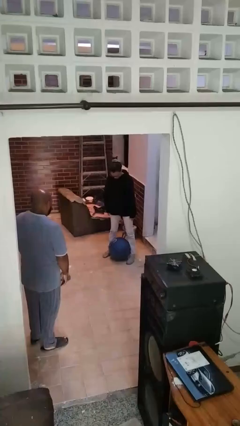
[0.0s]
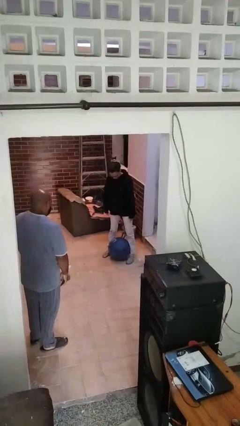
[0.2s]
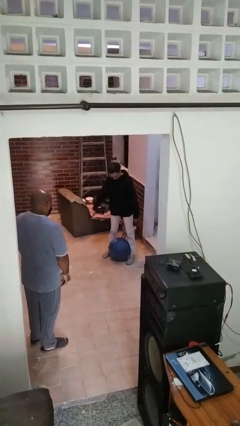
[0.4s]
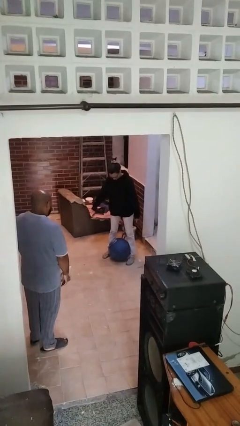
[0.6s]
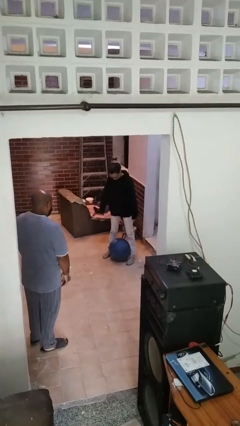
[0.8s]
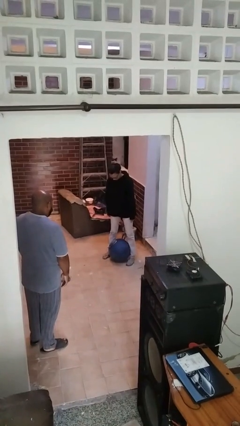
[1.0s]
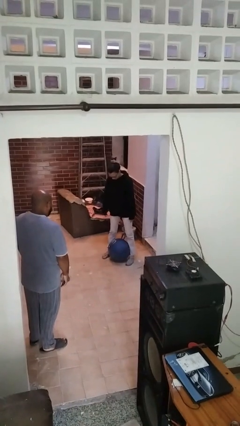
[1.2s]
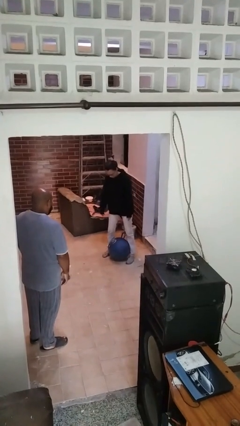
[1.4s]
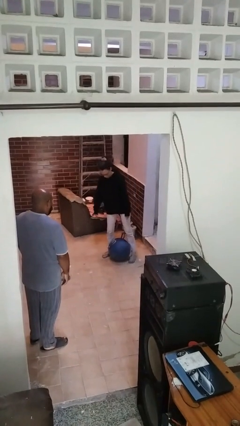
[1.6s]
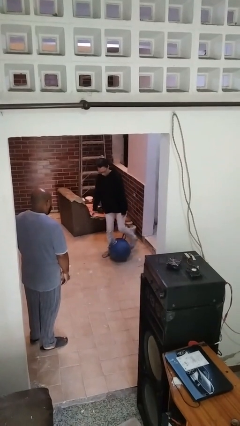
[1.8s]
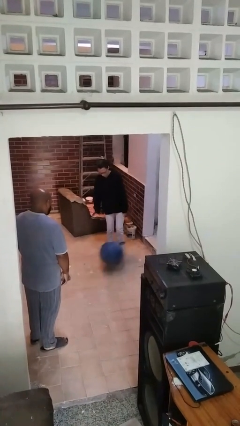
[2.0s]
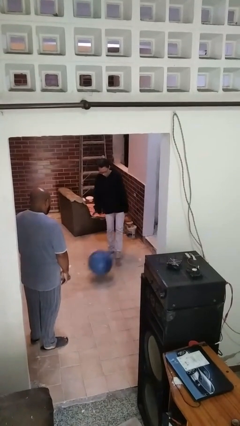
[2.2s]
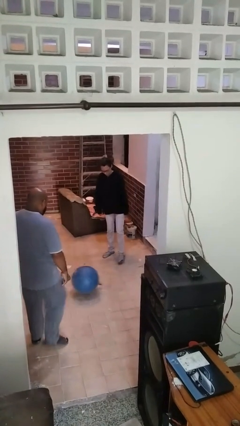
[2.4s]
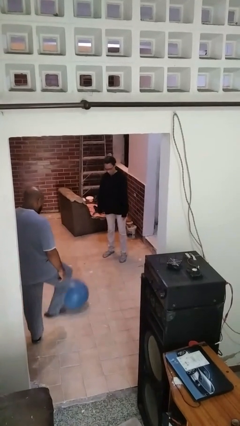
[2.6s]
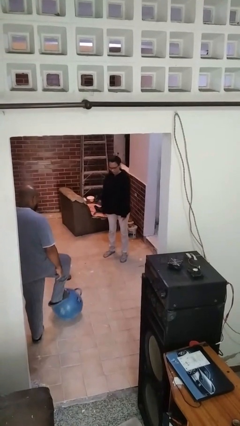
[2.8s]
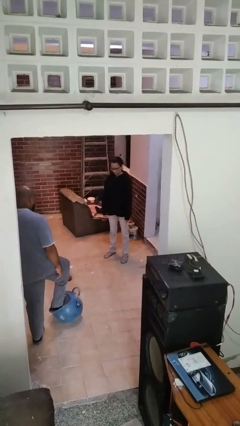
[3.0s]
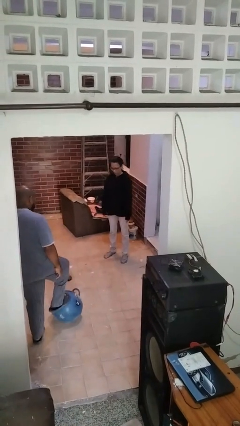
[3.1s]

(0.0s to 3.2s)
person kicks object to person

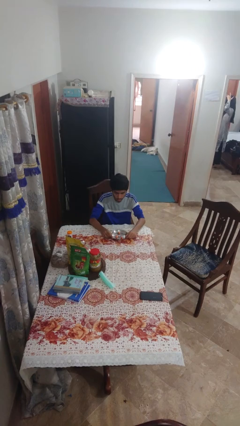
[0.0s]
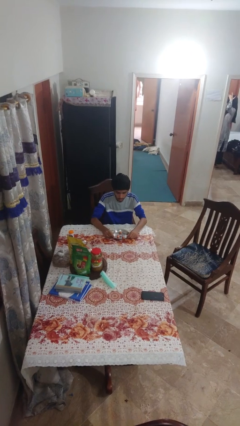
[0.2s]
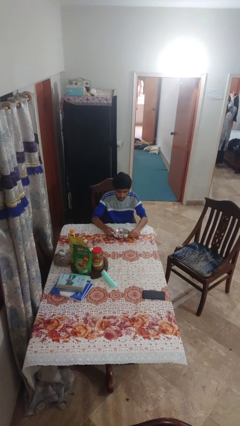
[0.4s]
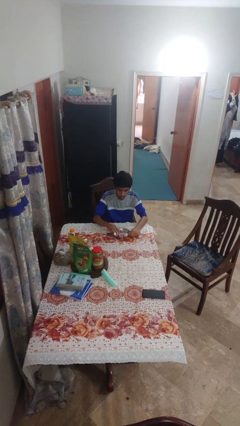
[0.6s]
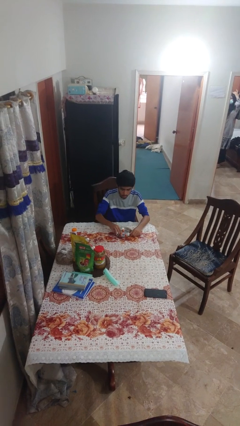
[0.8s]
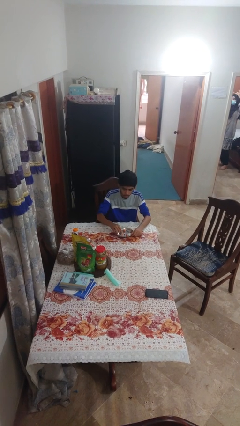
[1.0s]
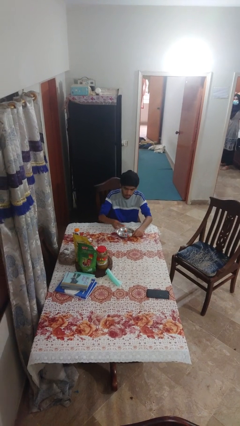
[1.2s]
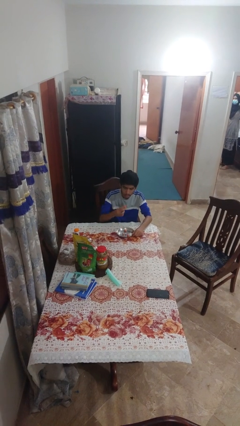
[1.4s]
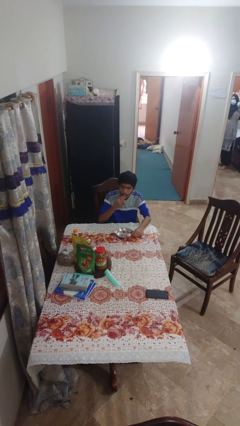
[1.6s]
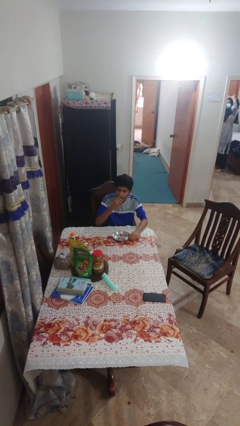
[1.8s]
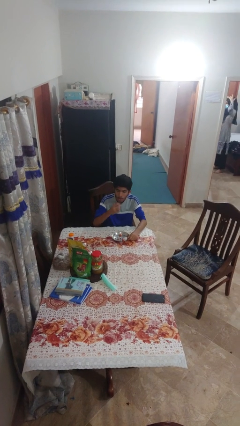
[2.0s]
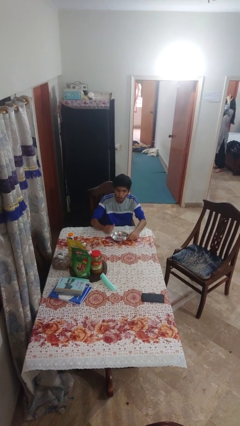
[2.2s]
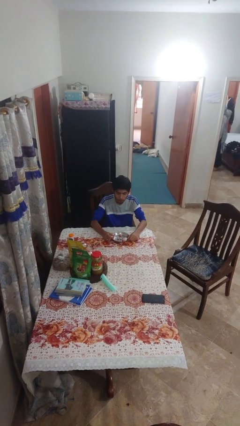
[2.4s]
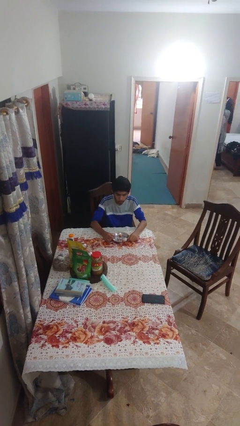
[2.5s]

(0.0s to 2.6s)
person eats with hands

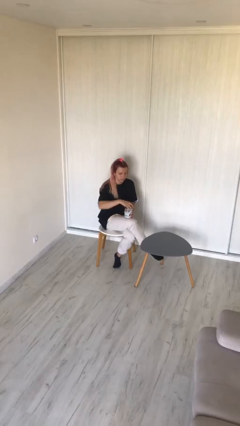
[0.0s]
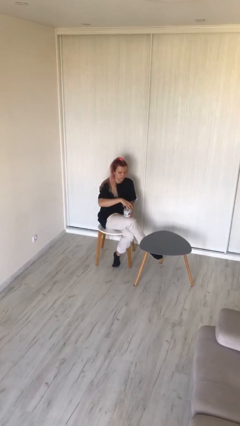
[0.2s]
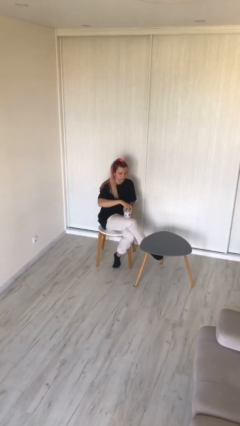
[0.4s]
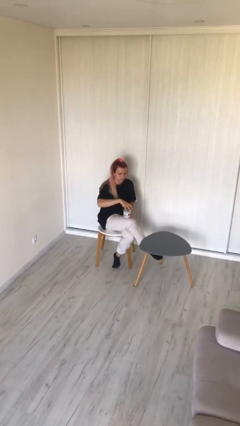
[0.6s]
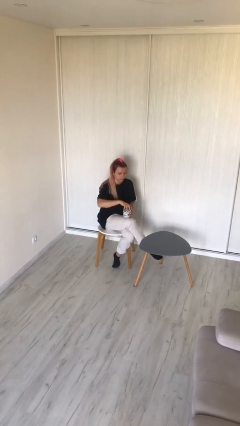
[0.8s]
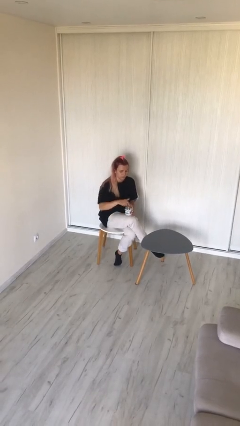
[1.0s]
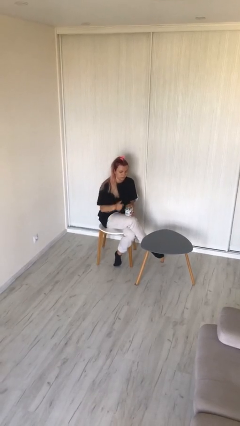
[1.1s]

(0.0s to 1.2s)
person closes jar

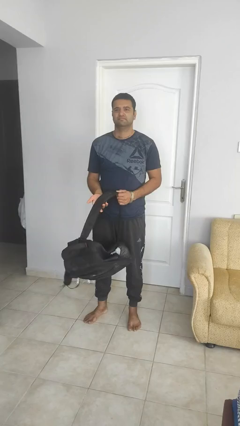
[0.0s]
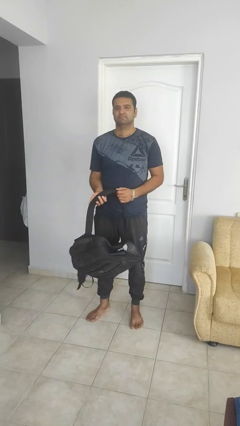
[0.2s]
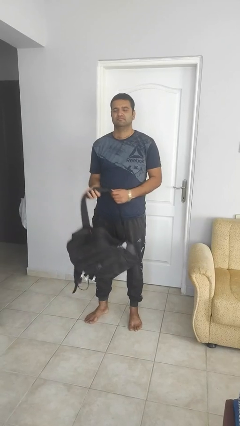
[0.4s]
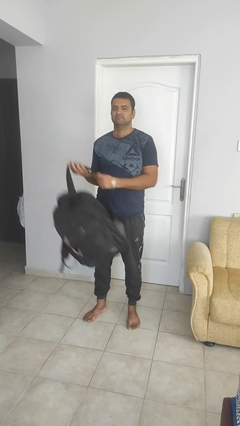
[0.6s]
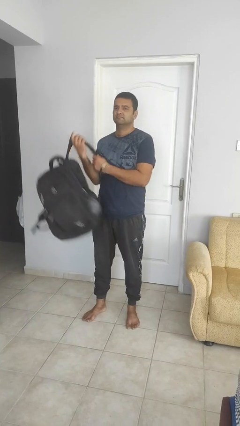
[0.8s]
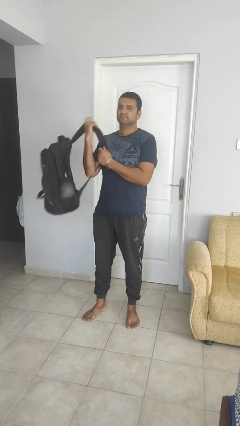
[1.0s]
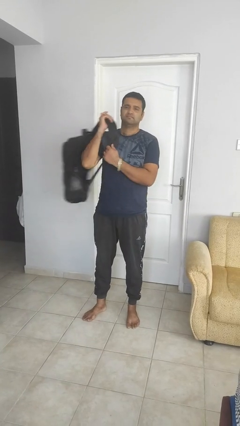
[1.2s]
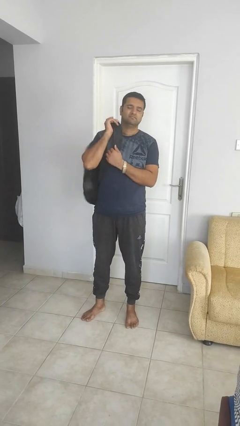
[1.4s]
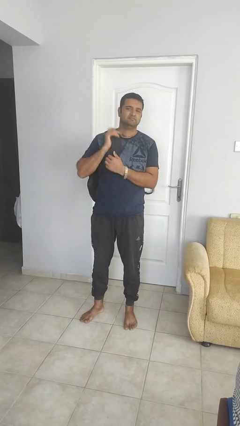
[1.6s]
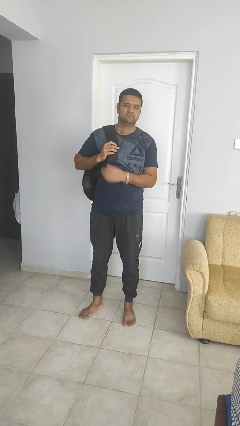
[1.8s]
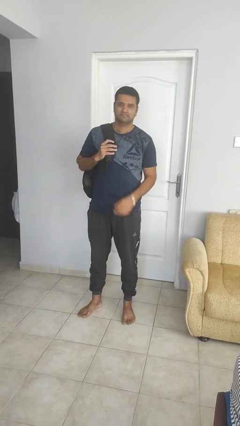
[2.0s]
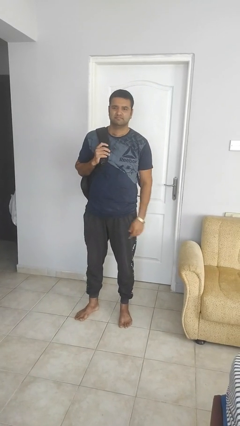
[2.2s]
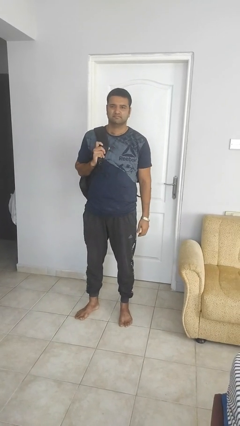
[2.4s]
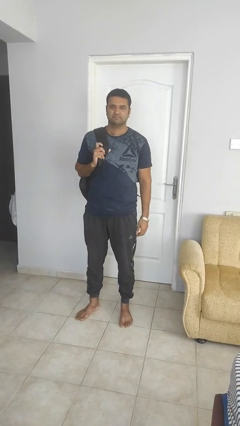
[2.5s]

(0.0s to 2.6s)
person puts on backpack

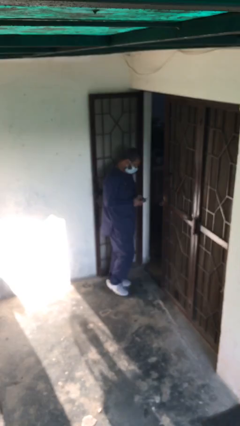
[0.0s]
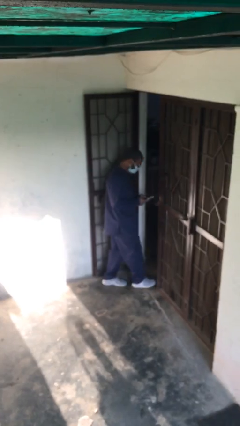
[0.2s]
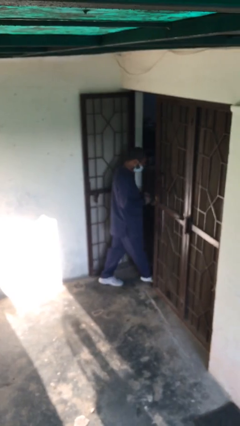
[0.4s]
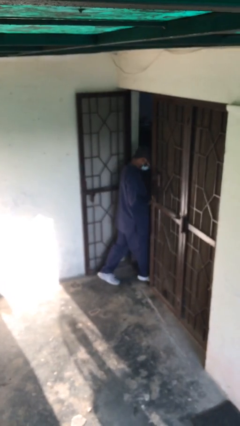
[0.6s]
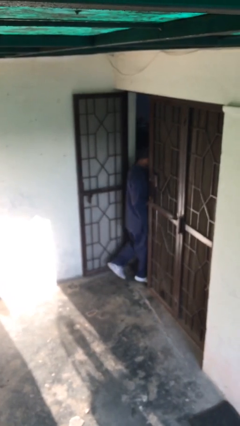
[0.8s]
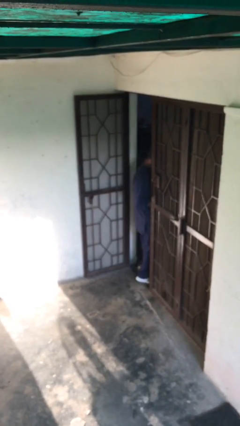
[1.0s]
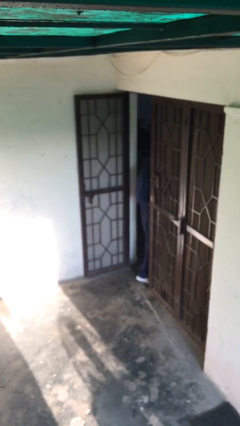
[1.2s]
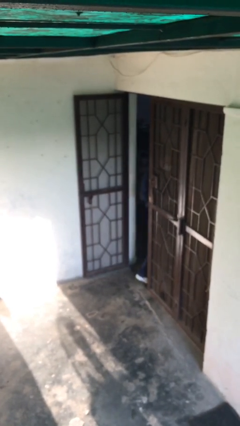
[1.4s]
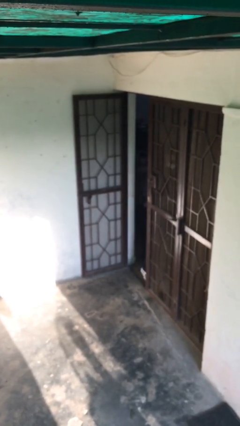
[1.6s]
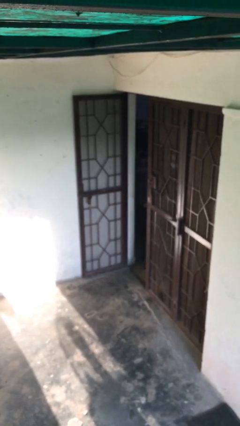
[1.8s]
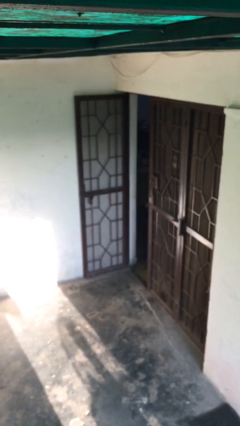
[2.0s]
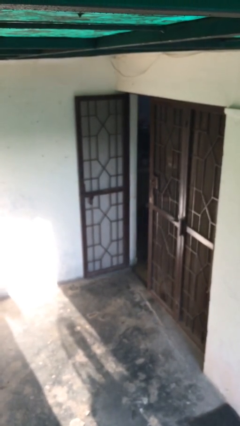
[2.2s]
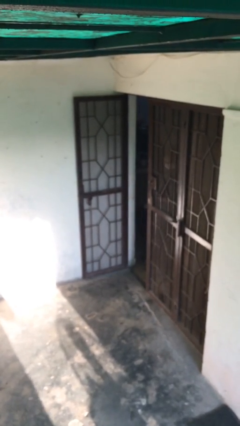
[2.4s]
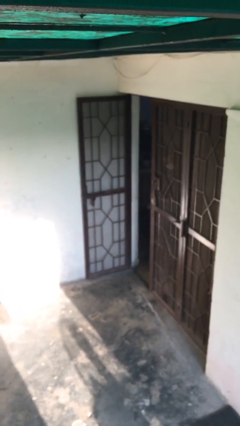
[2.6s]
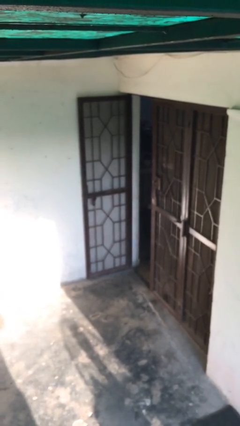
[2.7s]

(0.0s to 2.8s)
person exits scene through structure

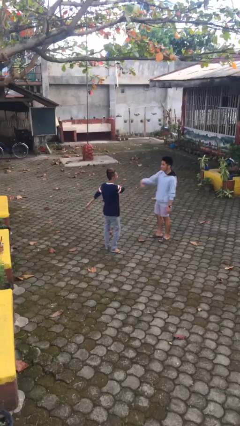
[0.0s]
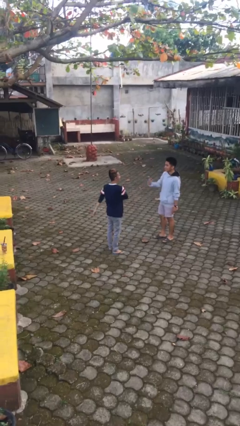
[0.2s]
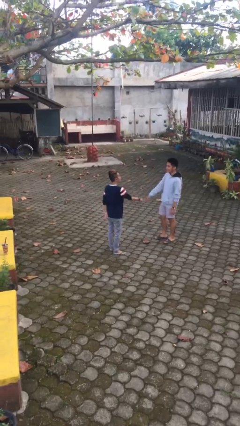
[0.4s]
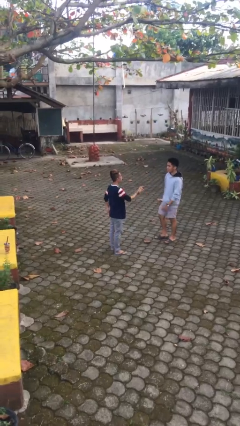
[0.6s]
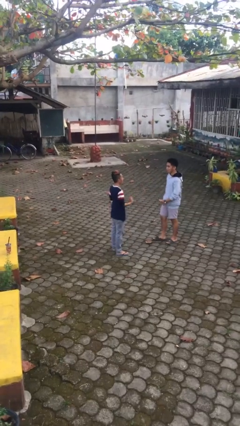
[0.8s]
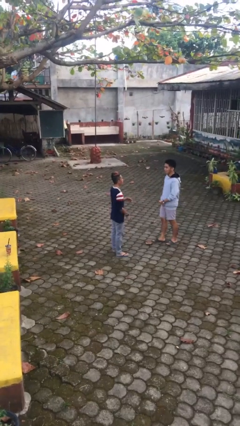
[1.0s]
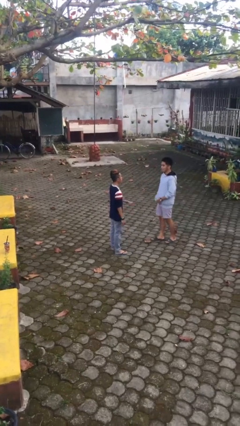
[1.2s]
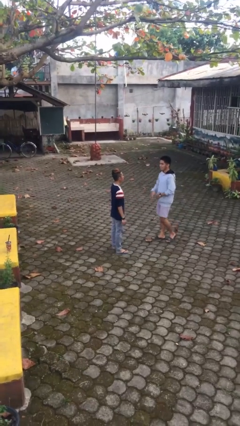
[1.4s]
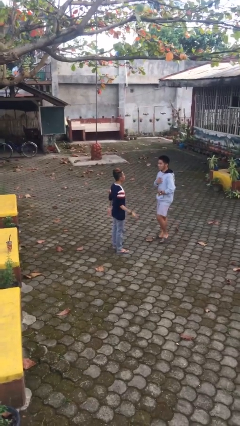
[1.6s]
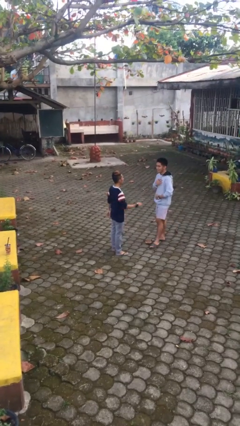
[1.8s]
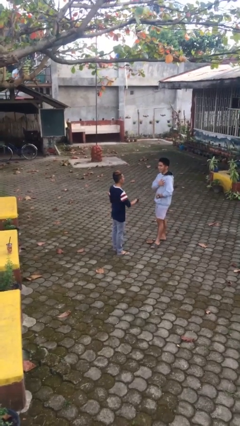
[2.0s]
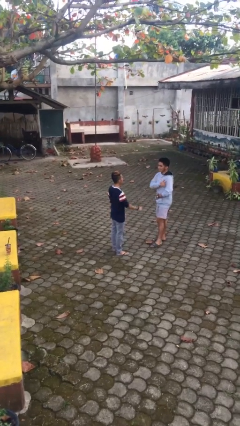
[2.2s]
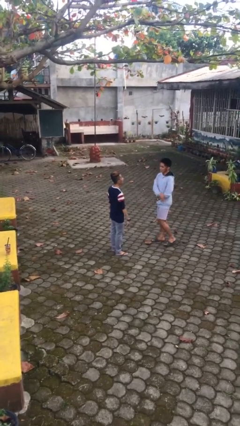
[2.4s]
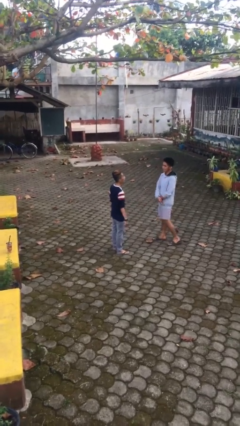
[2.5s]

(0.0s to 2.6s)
person talks to person

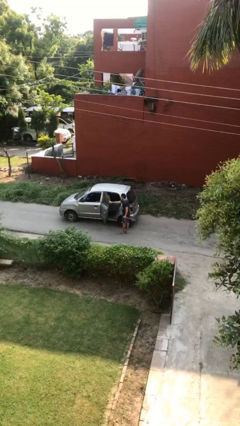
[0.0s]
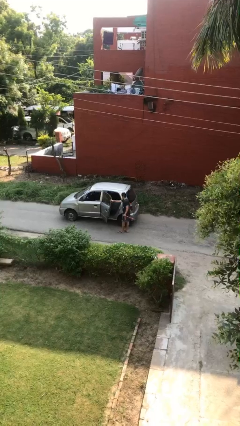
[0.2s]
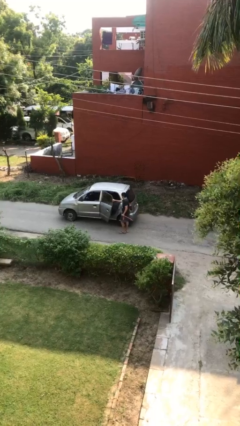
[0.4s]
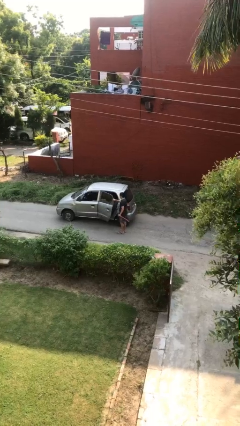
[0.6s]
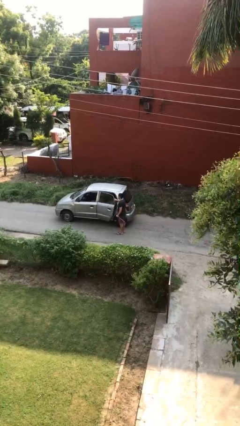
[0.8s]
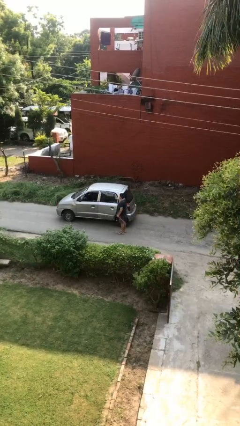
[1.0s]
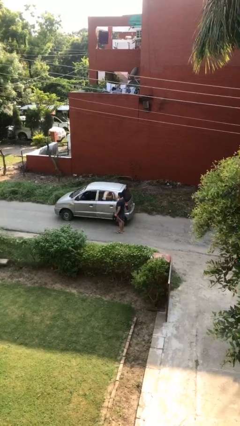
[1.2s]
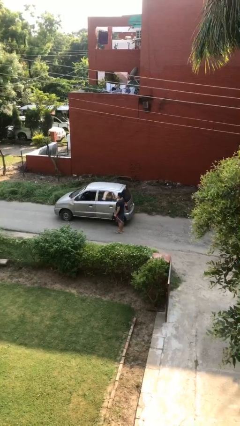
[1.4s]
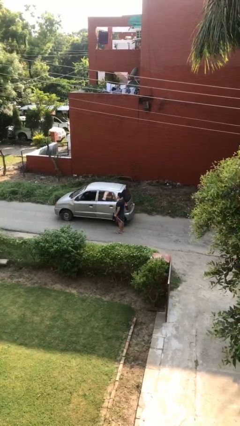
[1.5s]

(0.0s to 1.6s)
person closes car door

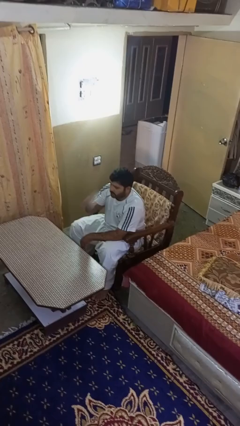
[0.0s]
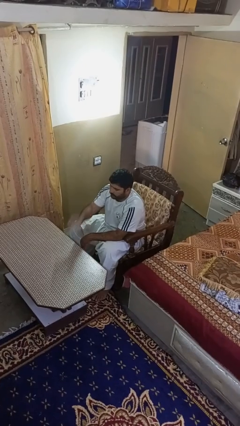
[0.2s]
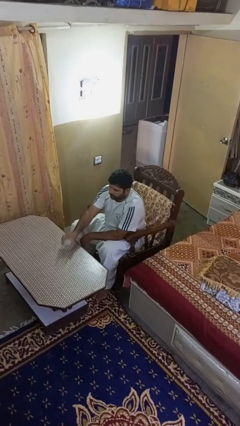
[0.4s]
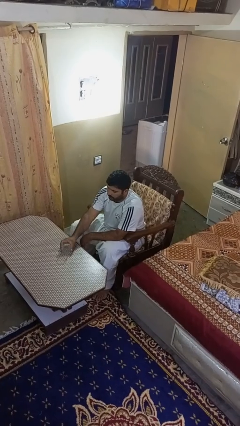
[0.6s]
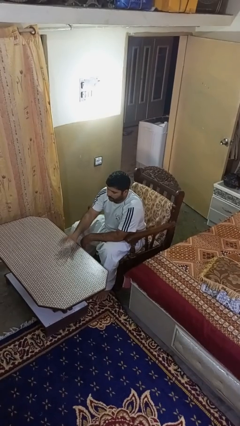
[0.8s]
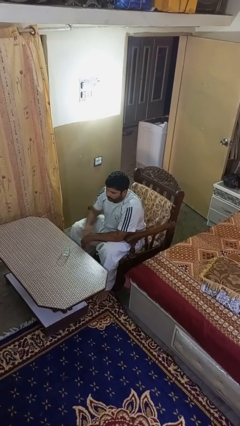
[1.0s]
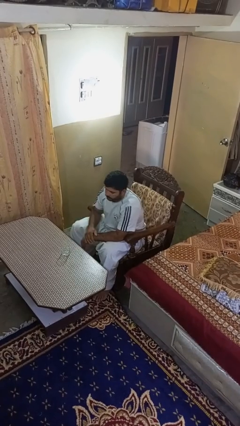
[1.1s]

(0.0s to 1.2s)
person puts down object on table
